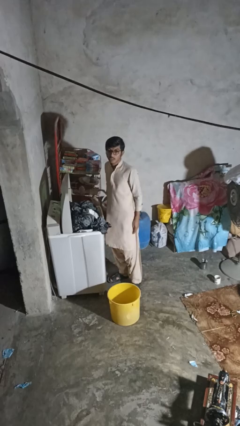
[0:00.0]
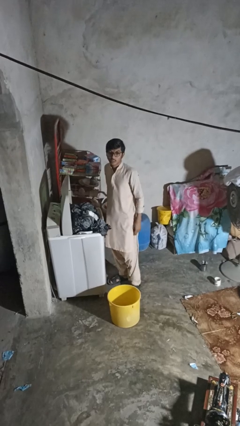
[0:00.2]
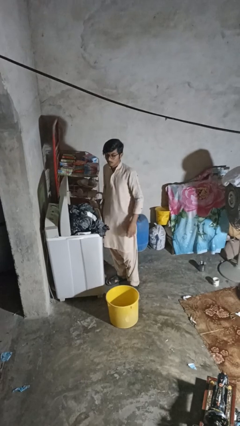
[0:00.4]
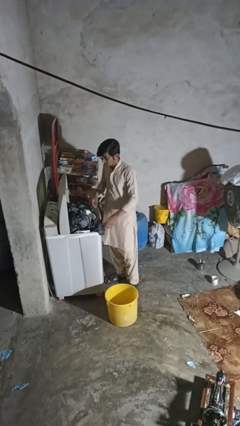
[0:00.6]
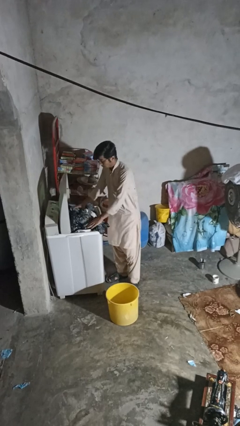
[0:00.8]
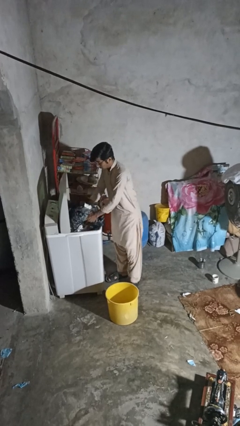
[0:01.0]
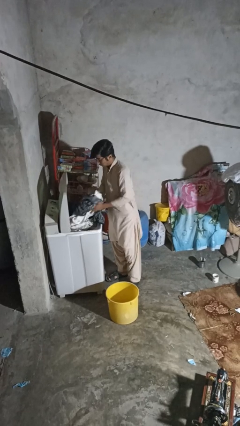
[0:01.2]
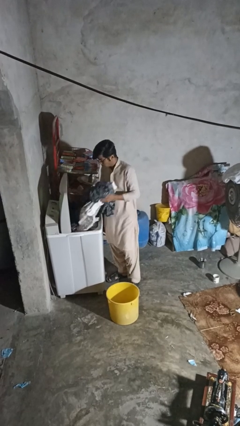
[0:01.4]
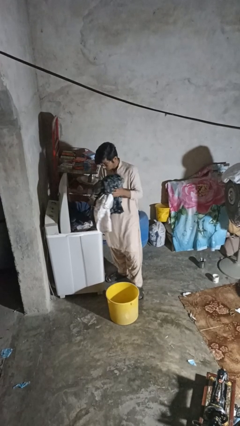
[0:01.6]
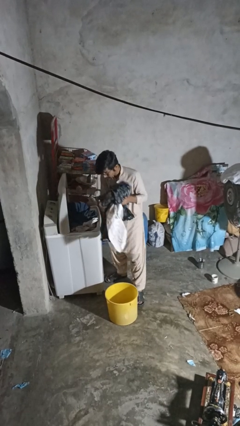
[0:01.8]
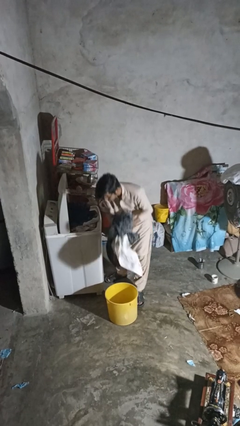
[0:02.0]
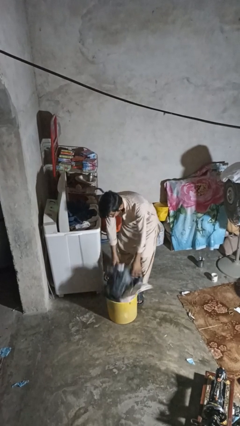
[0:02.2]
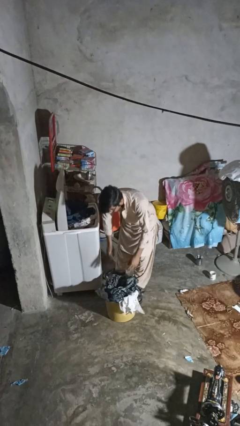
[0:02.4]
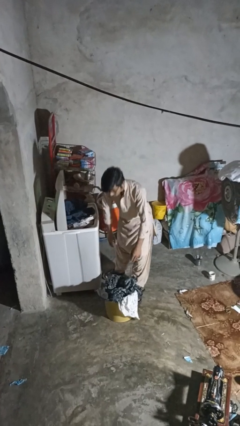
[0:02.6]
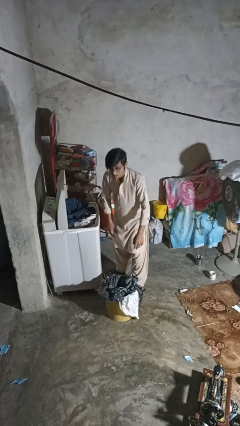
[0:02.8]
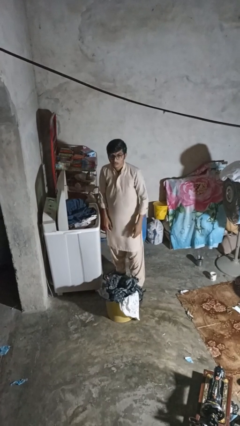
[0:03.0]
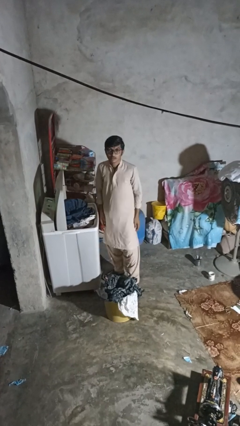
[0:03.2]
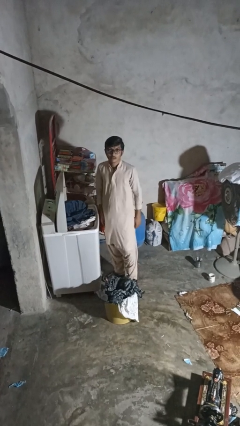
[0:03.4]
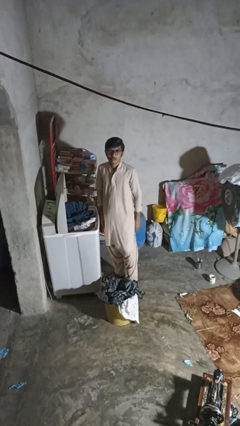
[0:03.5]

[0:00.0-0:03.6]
person unloads clotheswasher

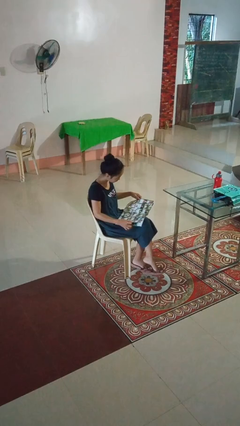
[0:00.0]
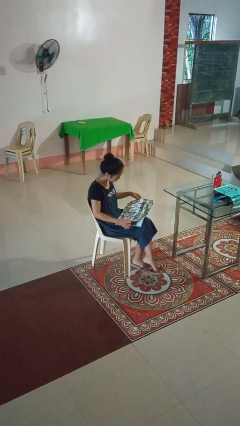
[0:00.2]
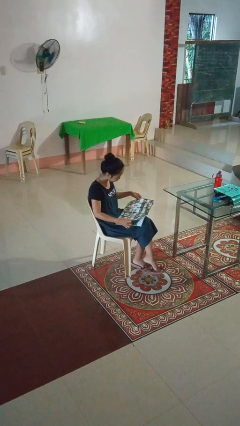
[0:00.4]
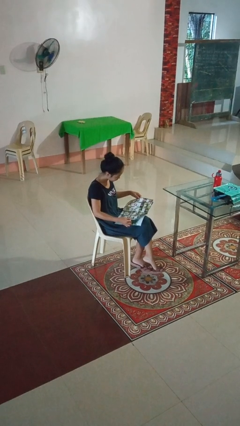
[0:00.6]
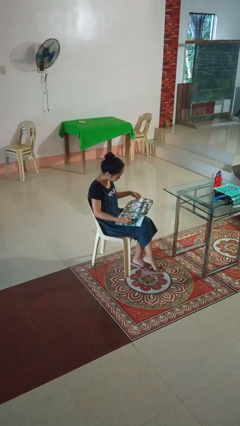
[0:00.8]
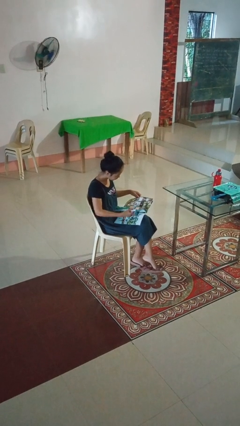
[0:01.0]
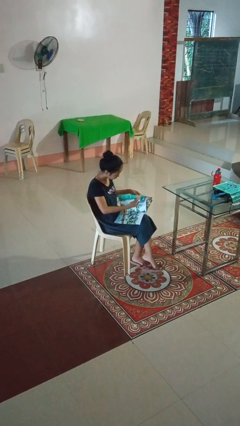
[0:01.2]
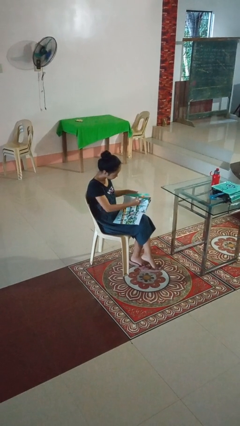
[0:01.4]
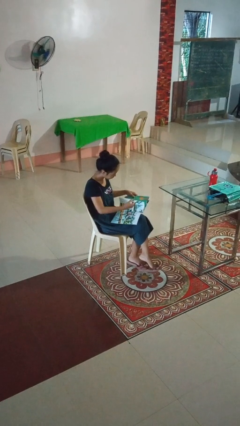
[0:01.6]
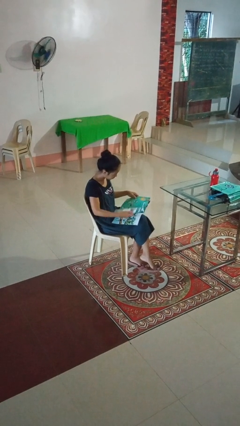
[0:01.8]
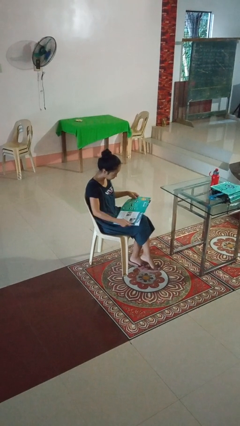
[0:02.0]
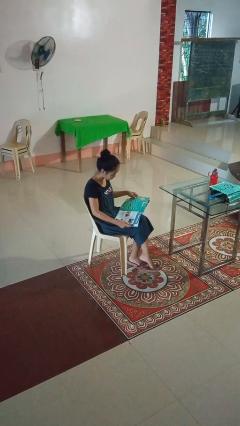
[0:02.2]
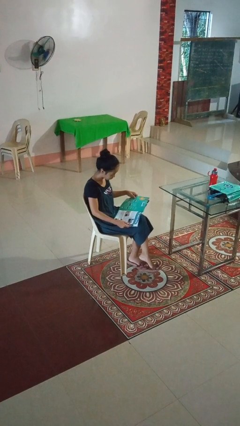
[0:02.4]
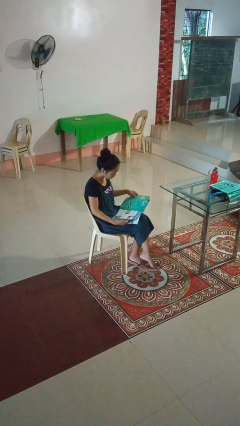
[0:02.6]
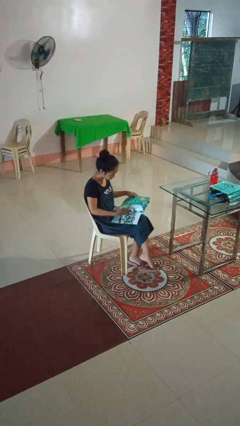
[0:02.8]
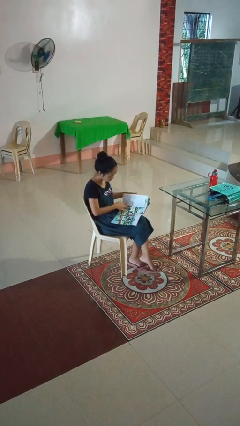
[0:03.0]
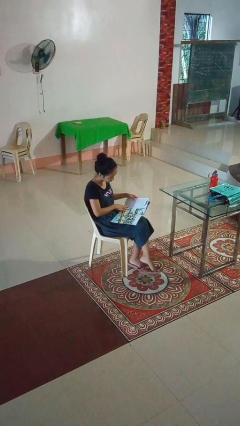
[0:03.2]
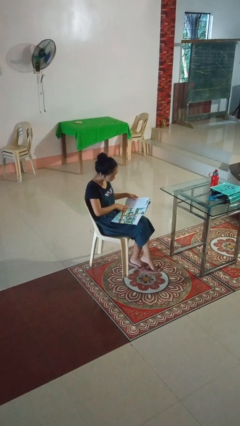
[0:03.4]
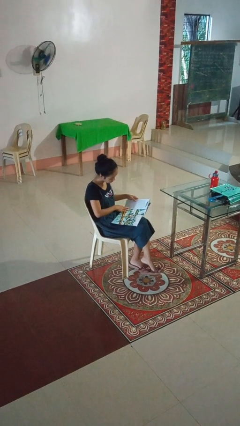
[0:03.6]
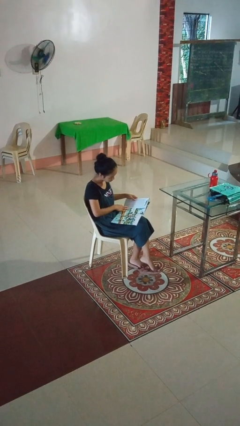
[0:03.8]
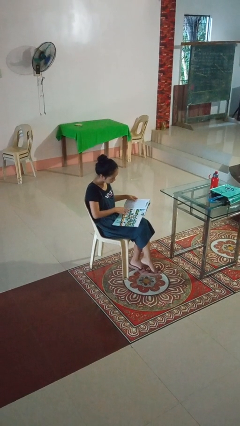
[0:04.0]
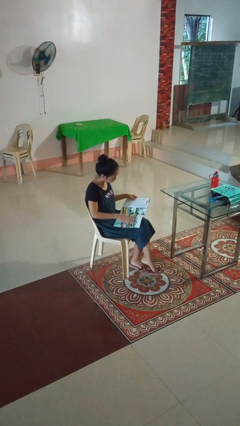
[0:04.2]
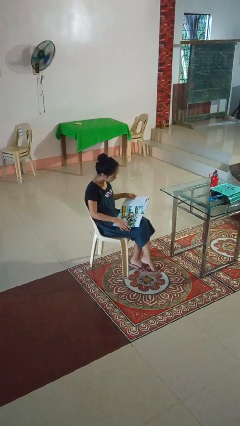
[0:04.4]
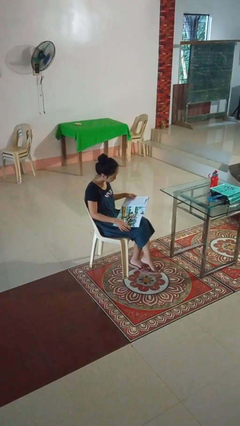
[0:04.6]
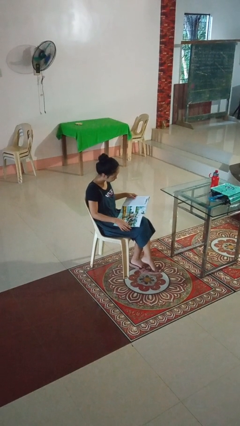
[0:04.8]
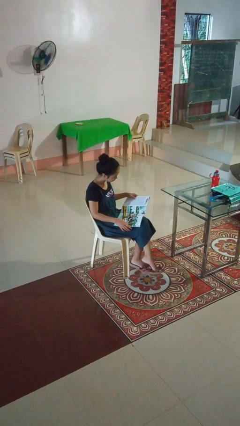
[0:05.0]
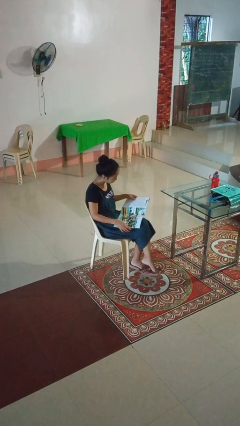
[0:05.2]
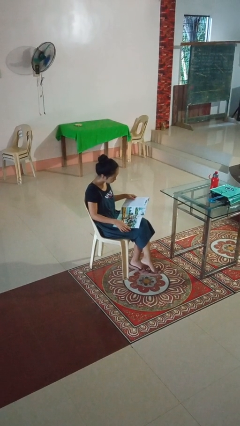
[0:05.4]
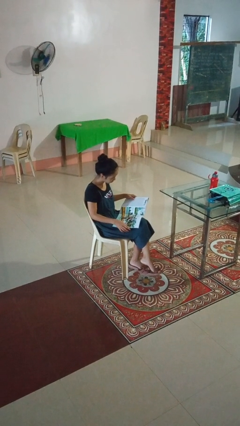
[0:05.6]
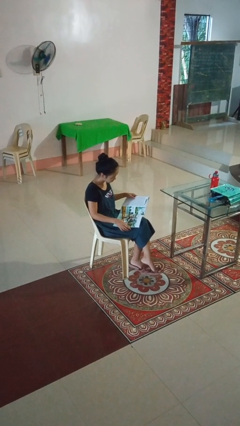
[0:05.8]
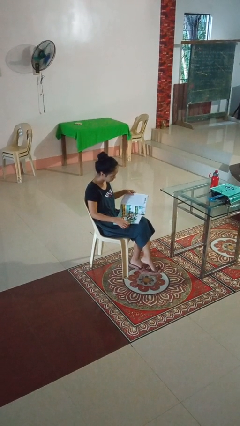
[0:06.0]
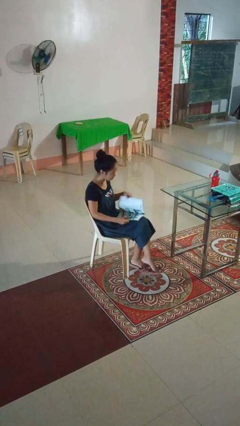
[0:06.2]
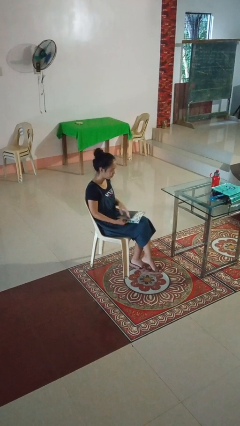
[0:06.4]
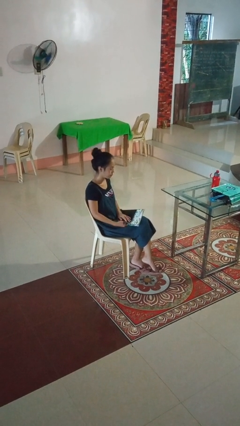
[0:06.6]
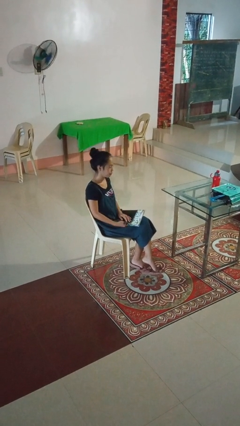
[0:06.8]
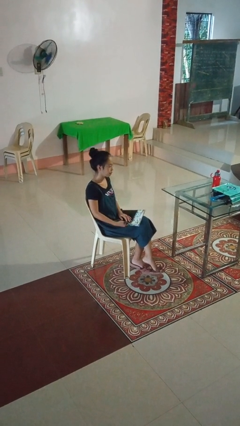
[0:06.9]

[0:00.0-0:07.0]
person reads magazine

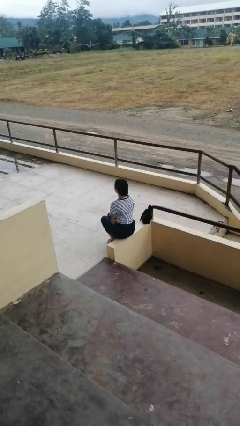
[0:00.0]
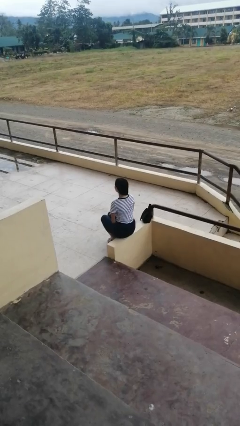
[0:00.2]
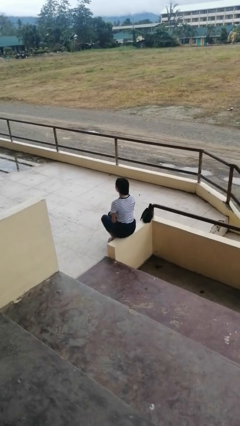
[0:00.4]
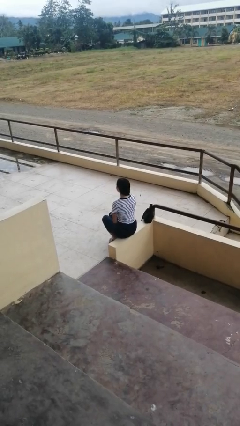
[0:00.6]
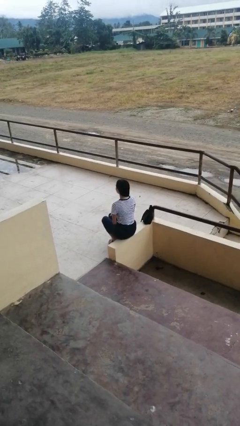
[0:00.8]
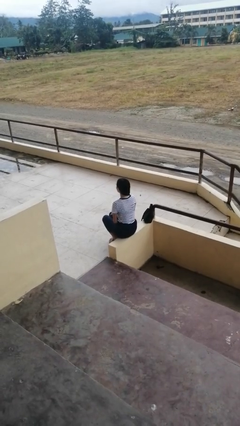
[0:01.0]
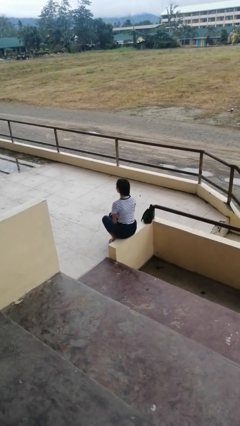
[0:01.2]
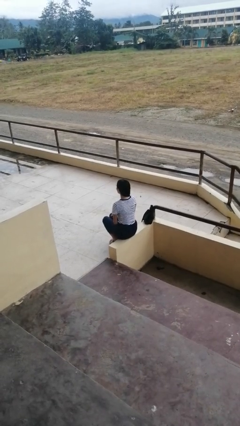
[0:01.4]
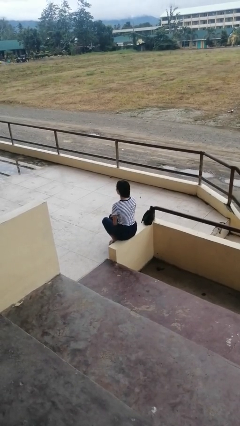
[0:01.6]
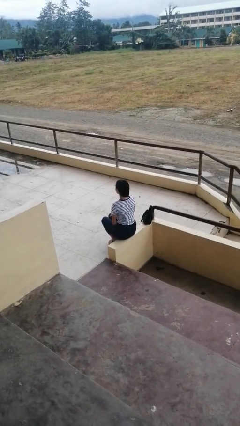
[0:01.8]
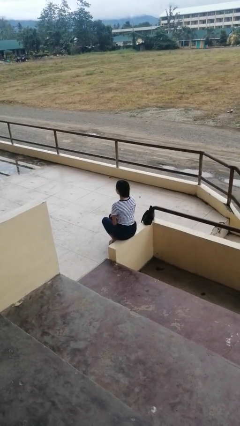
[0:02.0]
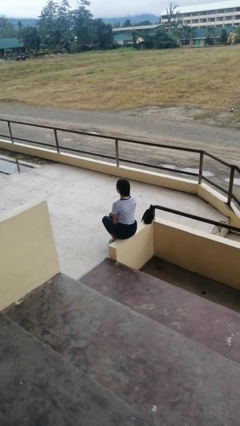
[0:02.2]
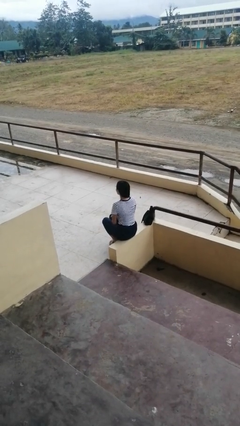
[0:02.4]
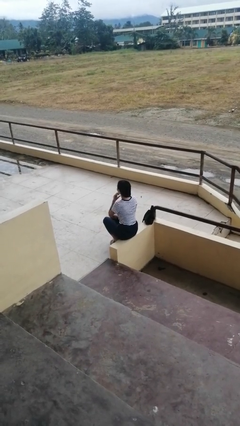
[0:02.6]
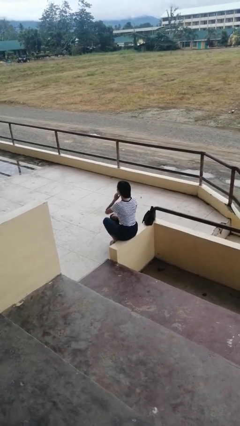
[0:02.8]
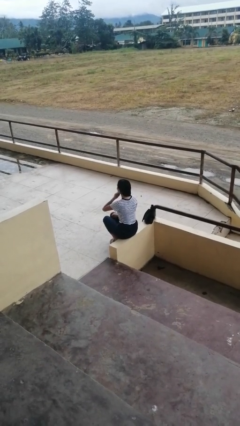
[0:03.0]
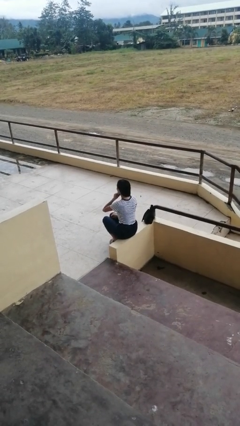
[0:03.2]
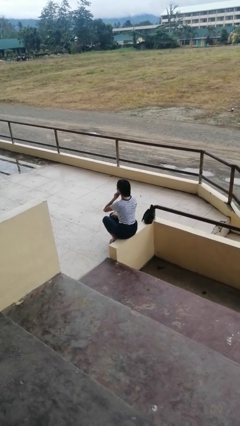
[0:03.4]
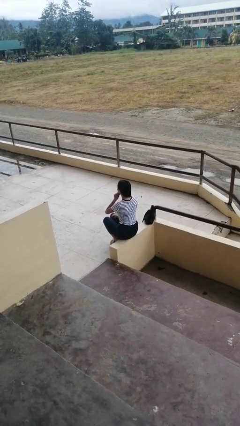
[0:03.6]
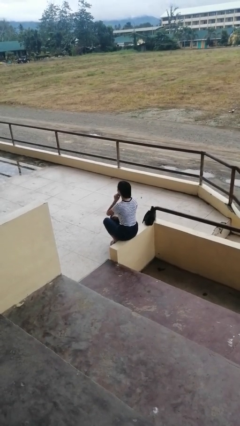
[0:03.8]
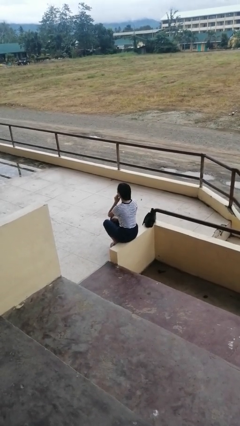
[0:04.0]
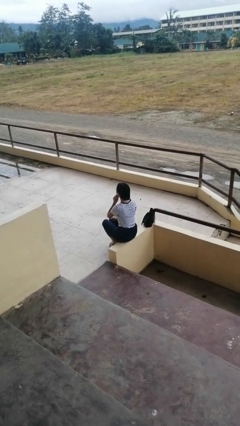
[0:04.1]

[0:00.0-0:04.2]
person strokes chin

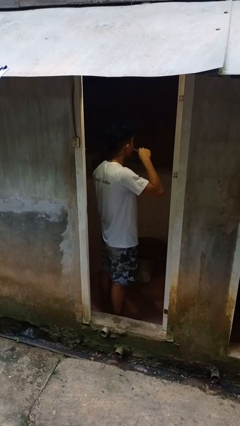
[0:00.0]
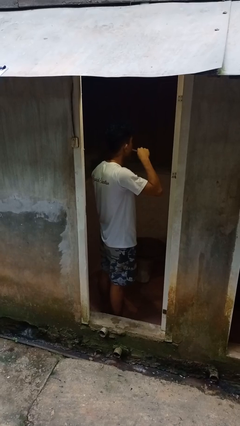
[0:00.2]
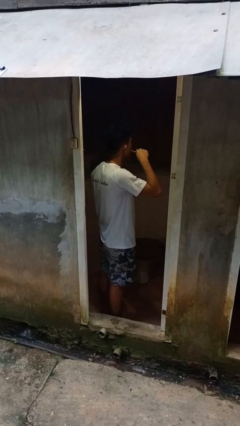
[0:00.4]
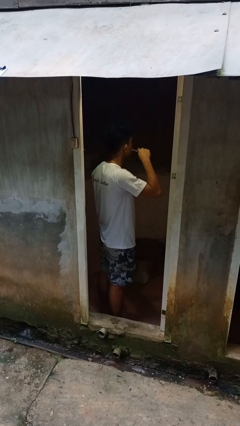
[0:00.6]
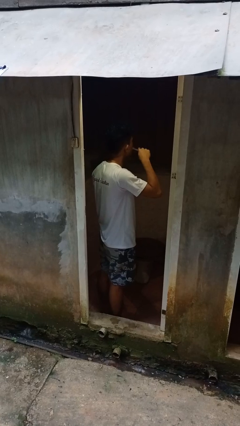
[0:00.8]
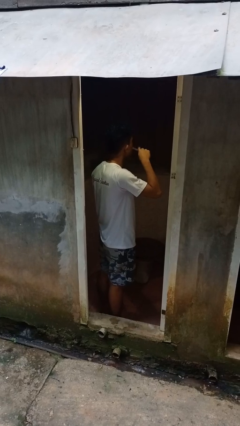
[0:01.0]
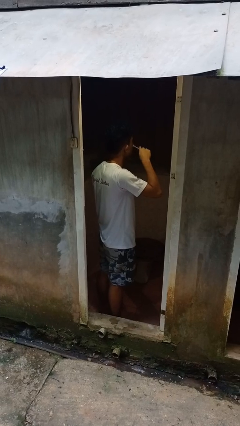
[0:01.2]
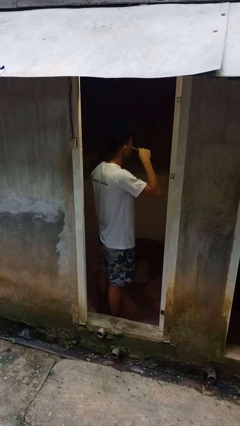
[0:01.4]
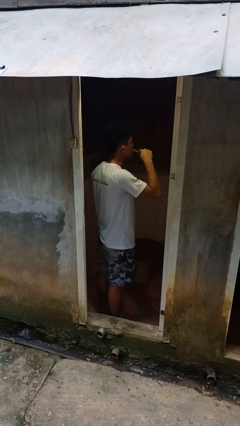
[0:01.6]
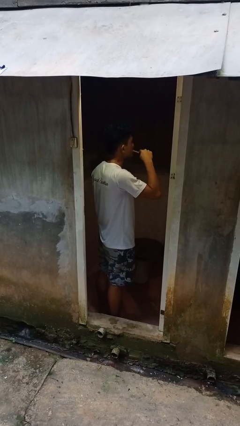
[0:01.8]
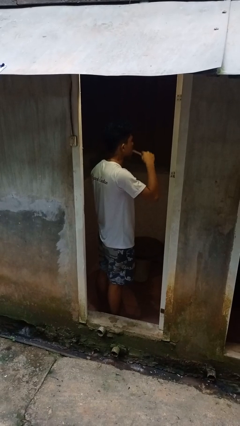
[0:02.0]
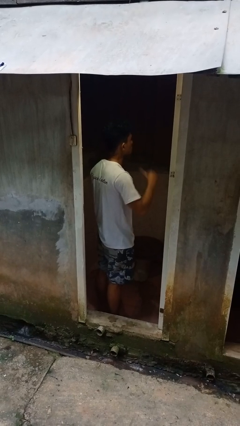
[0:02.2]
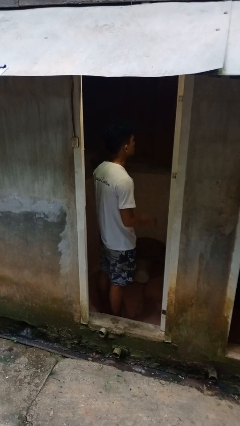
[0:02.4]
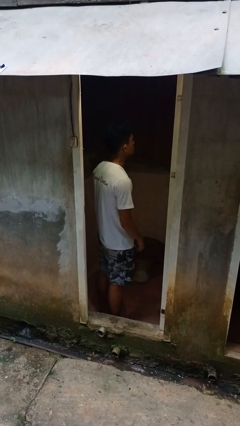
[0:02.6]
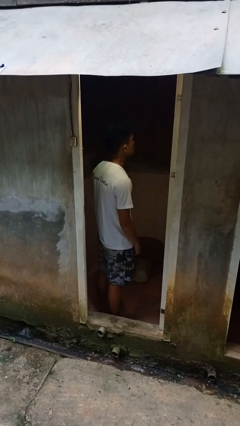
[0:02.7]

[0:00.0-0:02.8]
person brushes teeth
